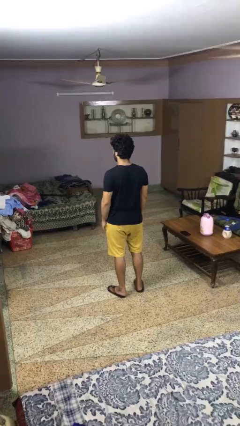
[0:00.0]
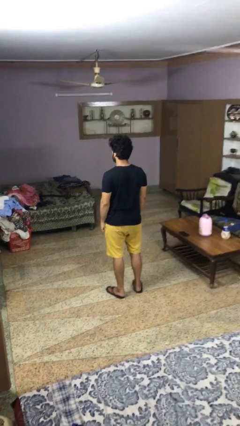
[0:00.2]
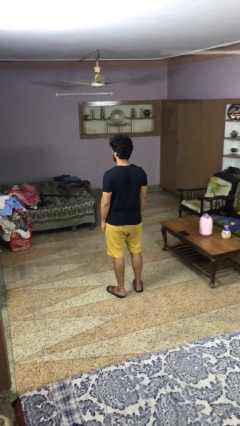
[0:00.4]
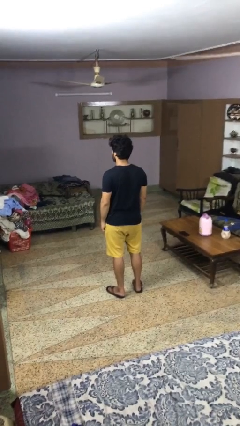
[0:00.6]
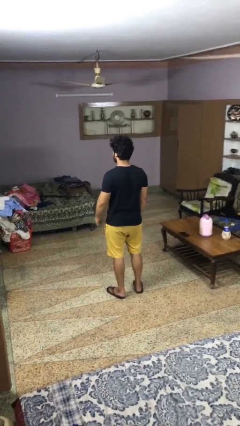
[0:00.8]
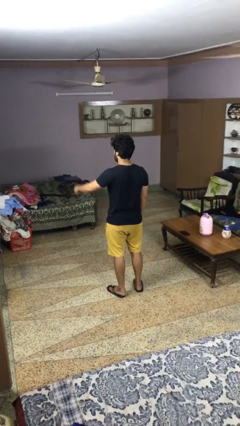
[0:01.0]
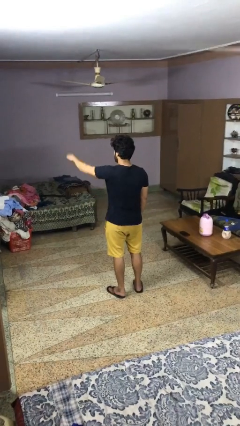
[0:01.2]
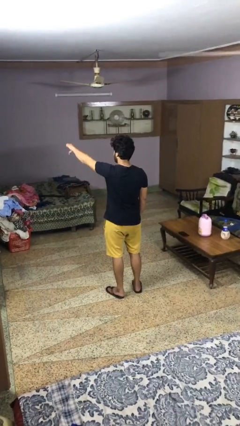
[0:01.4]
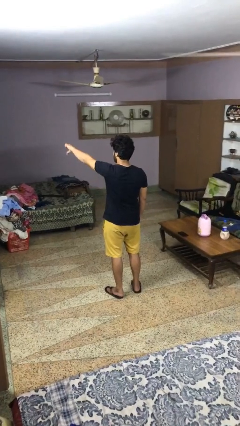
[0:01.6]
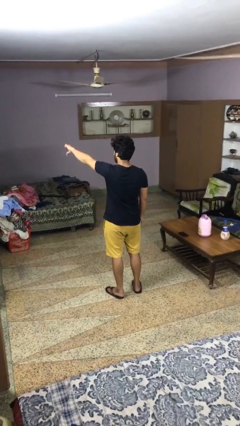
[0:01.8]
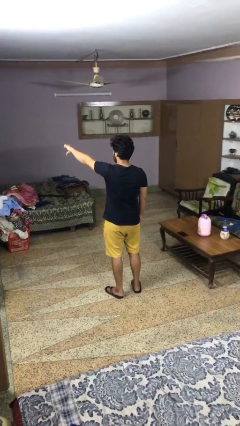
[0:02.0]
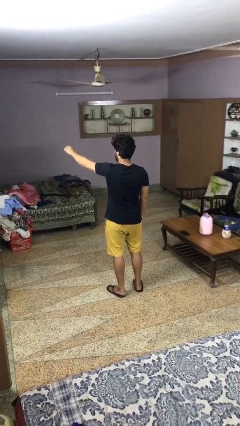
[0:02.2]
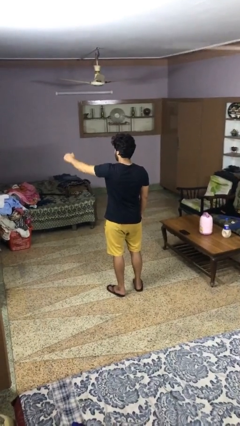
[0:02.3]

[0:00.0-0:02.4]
person gestures thumbs down

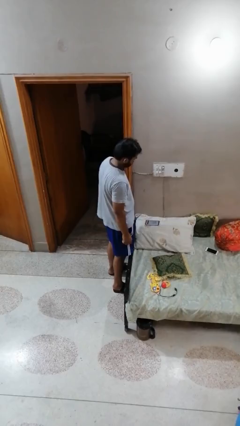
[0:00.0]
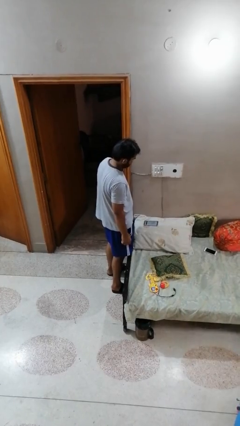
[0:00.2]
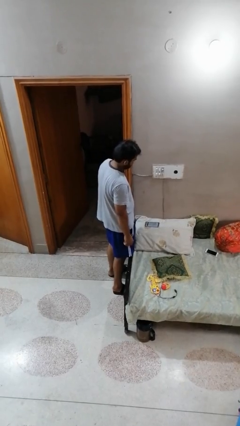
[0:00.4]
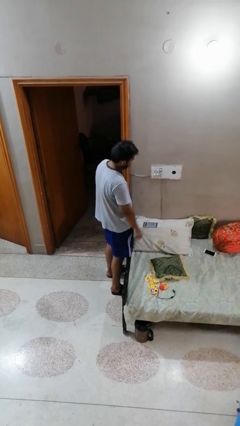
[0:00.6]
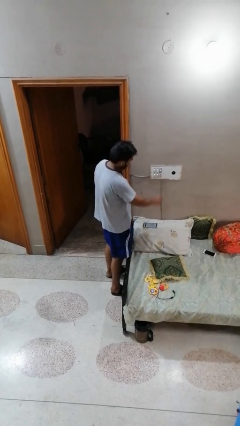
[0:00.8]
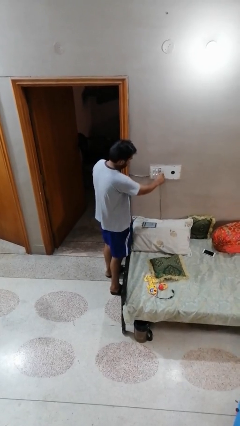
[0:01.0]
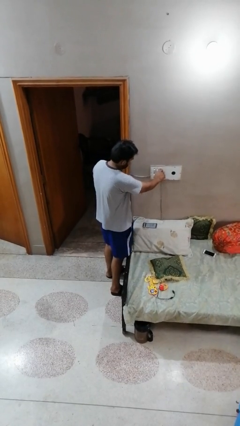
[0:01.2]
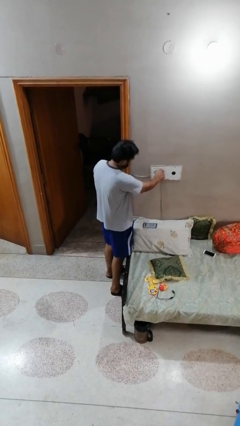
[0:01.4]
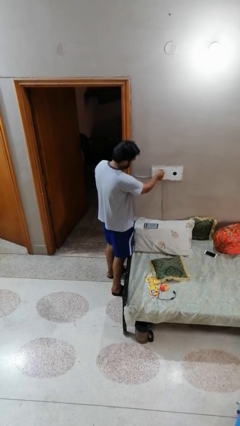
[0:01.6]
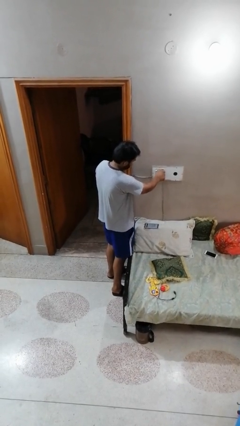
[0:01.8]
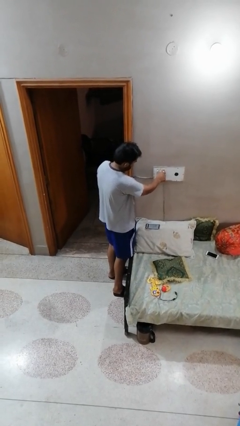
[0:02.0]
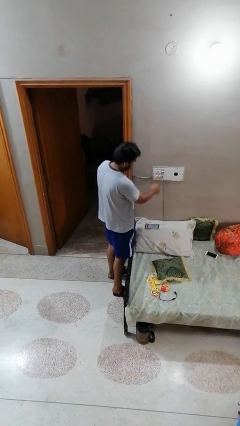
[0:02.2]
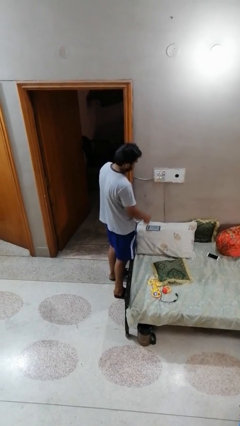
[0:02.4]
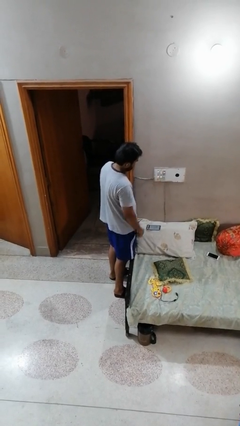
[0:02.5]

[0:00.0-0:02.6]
person adjusts thermostat

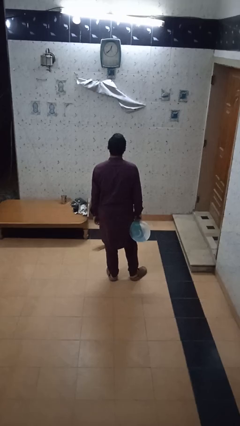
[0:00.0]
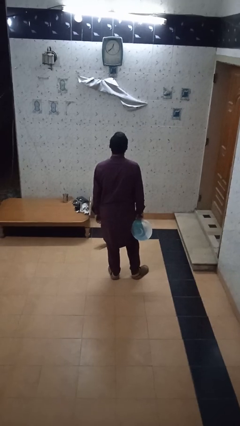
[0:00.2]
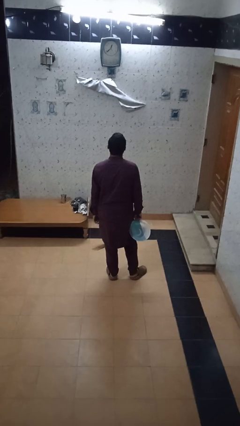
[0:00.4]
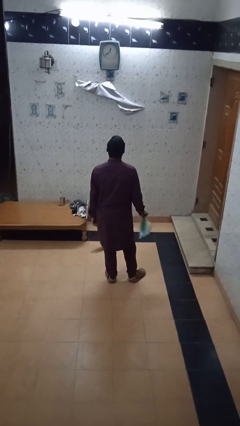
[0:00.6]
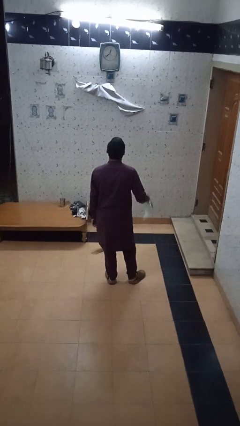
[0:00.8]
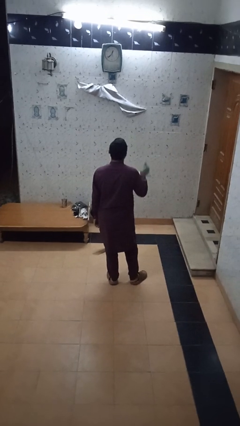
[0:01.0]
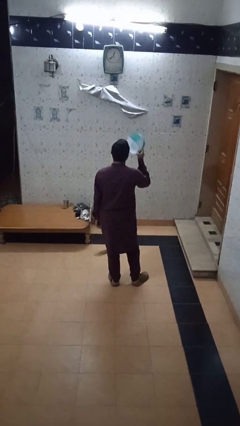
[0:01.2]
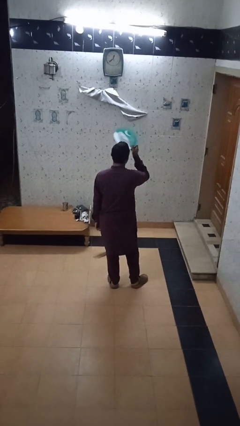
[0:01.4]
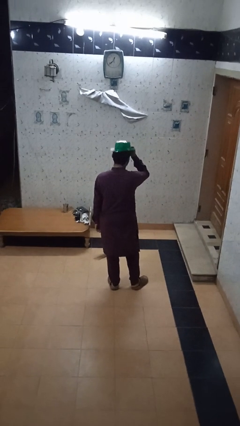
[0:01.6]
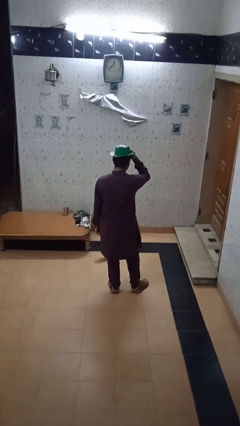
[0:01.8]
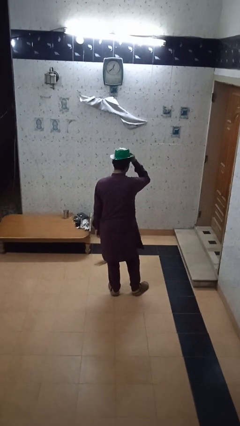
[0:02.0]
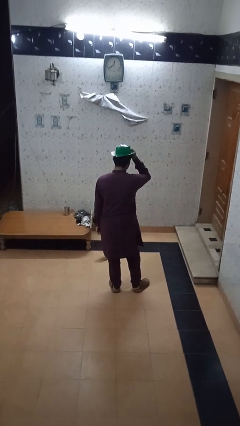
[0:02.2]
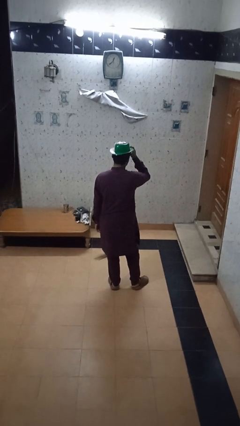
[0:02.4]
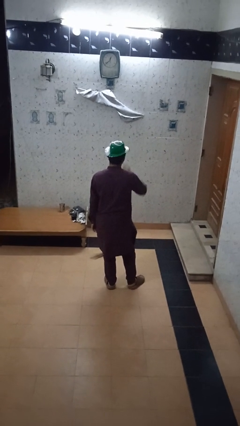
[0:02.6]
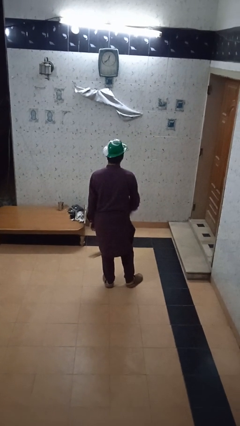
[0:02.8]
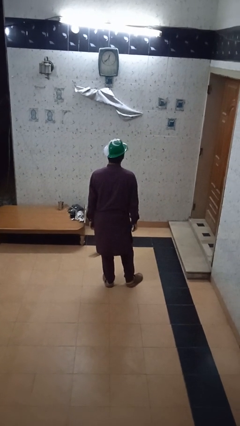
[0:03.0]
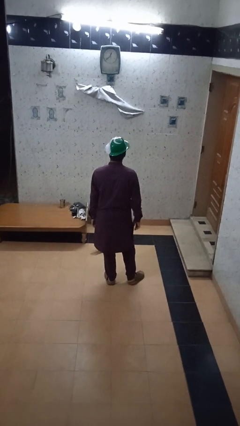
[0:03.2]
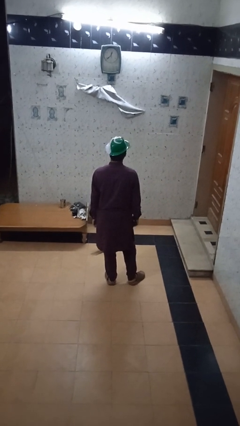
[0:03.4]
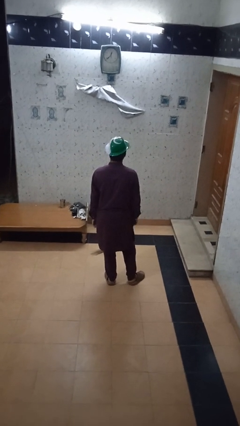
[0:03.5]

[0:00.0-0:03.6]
person puts on hat

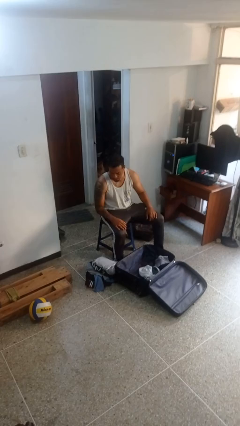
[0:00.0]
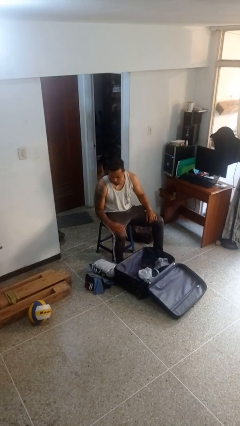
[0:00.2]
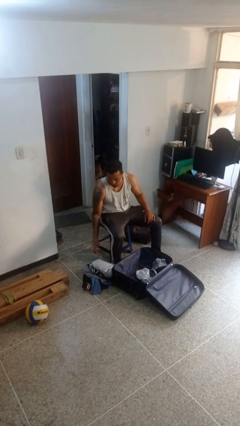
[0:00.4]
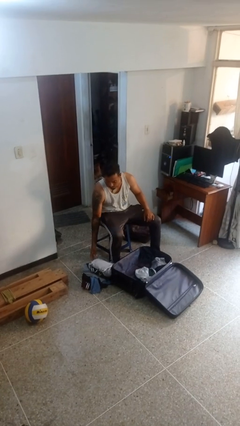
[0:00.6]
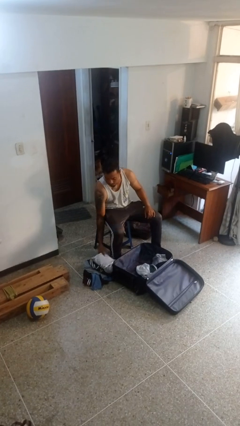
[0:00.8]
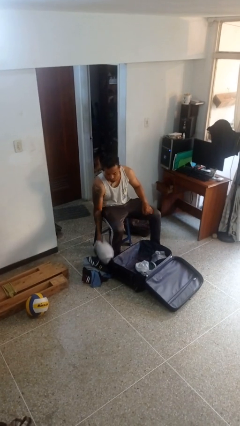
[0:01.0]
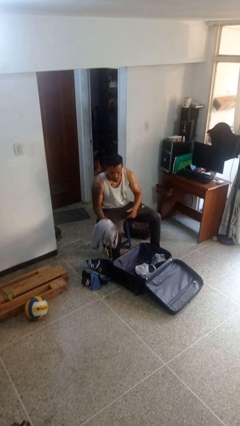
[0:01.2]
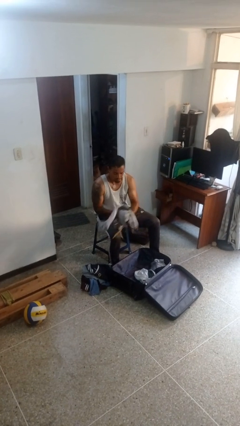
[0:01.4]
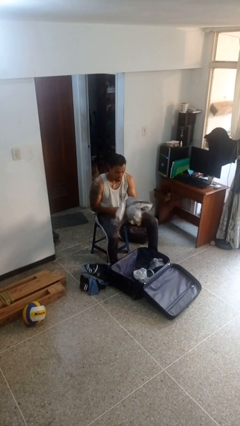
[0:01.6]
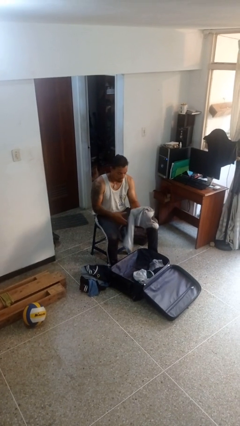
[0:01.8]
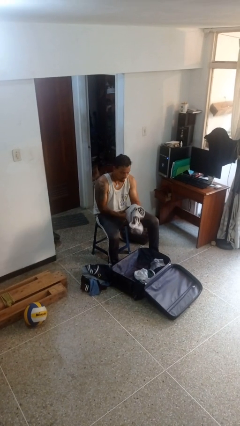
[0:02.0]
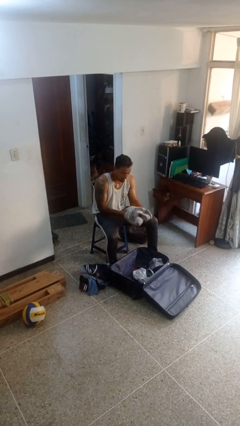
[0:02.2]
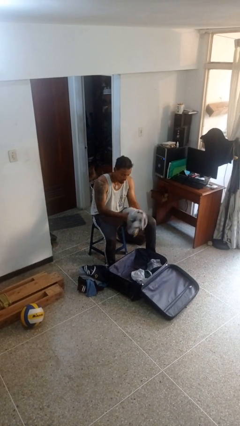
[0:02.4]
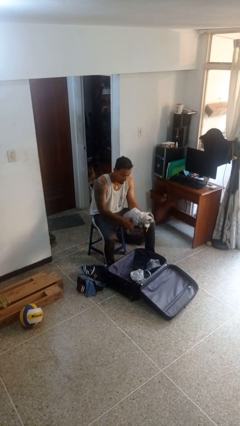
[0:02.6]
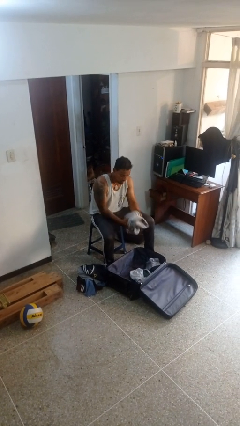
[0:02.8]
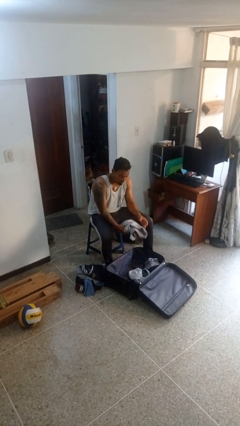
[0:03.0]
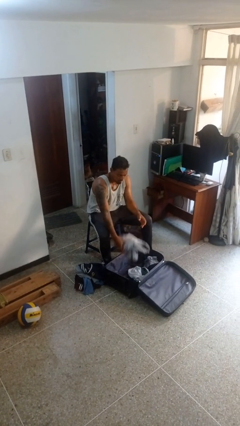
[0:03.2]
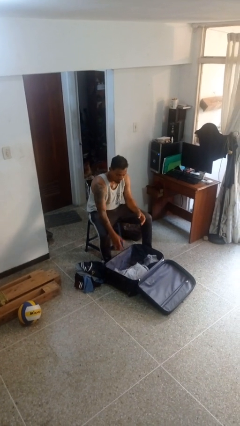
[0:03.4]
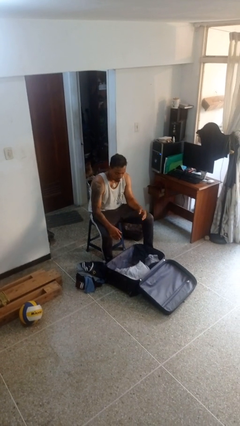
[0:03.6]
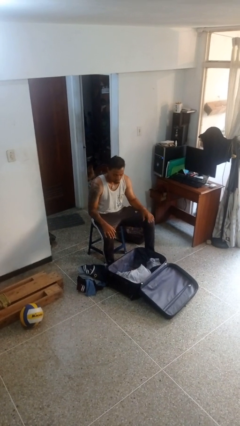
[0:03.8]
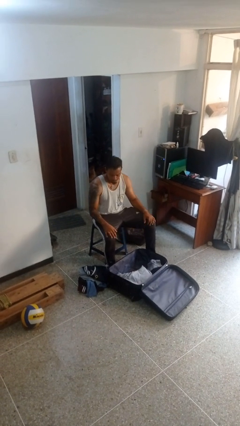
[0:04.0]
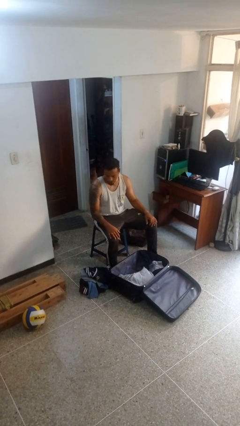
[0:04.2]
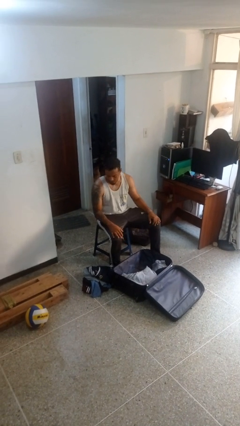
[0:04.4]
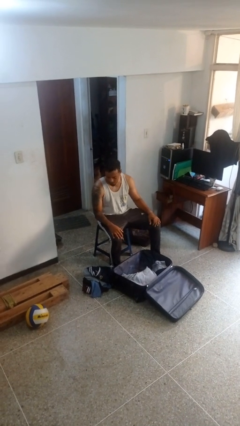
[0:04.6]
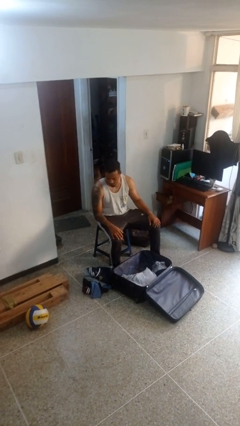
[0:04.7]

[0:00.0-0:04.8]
person loads clothes into suitcase

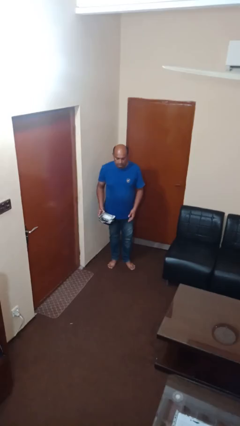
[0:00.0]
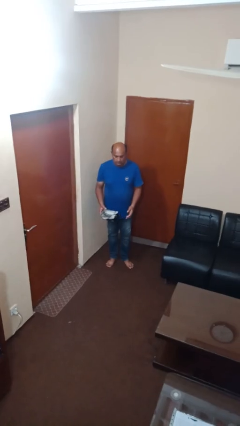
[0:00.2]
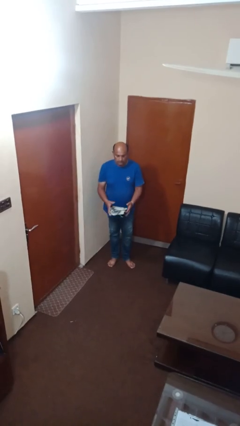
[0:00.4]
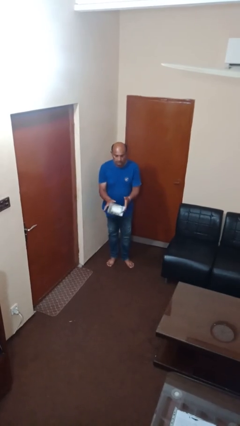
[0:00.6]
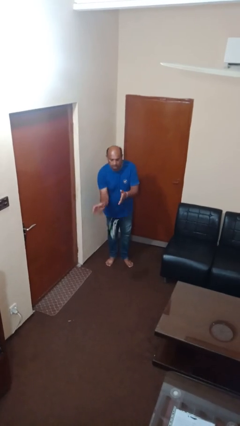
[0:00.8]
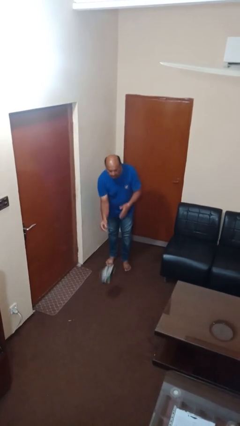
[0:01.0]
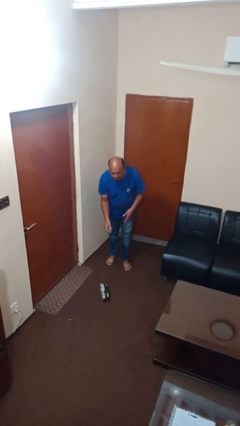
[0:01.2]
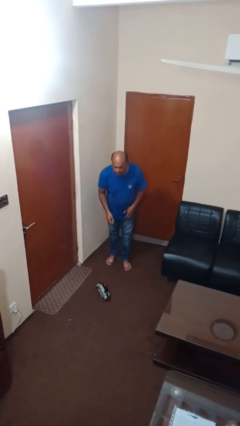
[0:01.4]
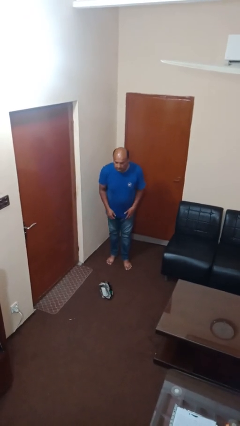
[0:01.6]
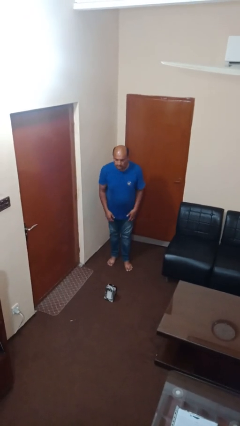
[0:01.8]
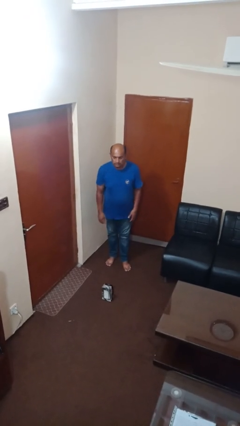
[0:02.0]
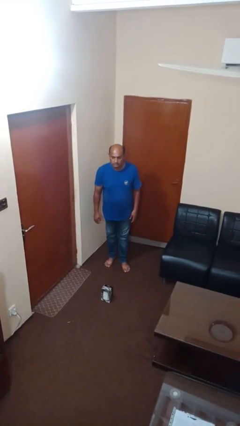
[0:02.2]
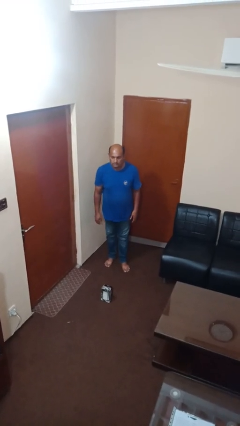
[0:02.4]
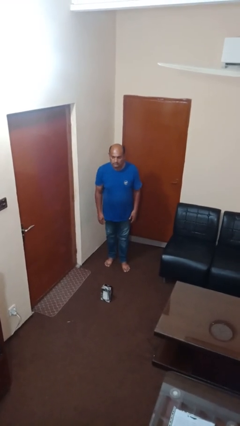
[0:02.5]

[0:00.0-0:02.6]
person drops object

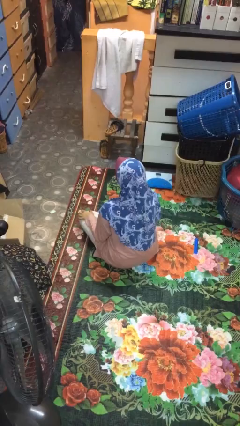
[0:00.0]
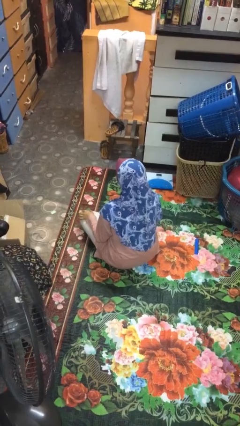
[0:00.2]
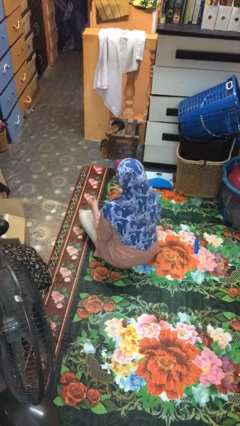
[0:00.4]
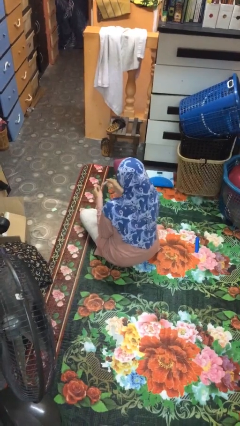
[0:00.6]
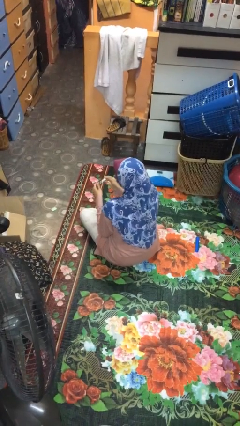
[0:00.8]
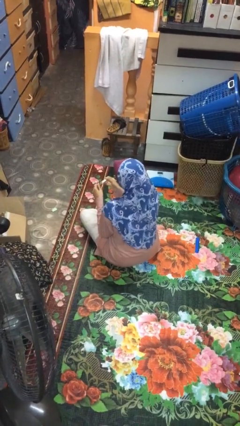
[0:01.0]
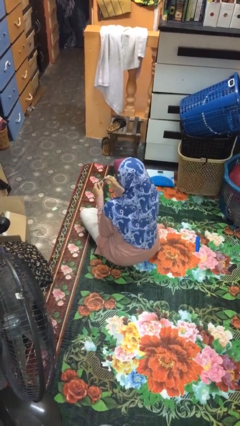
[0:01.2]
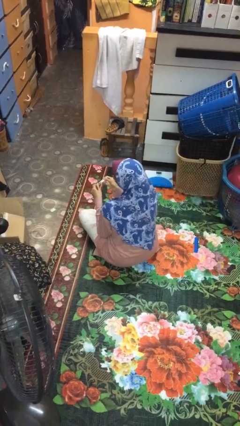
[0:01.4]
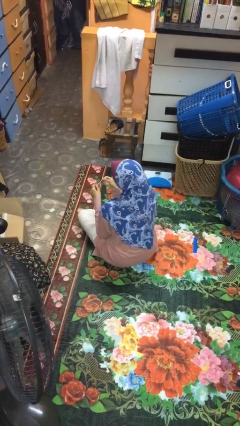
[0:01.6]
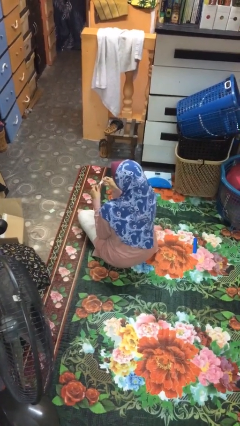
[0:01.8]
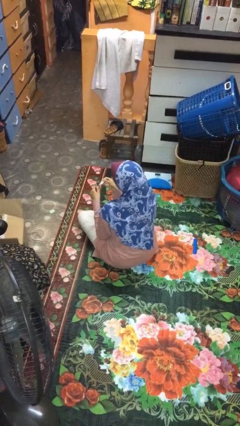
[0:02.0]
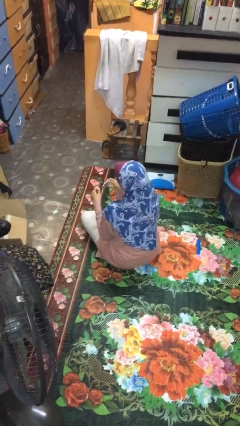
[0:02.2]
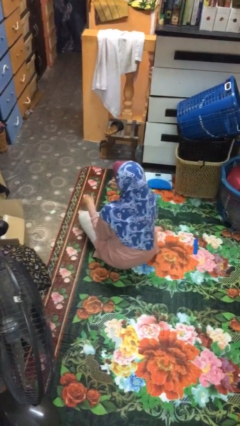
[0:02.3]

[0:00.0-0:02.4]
person clips fingernails
